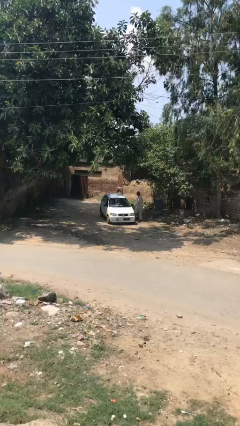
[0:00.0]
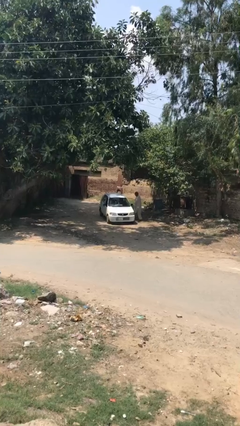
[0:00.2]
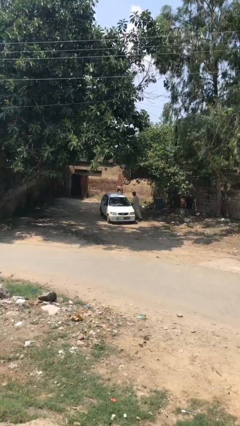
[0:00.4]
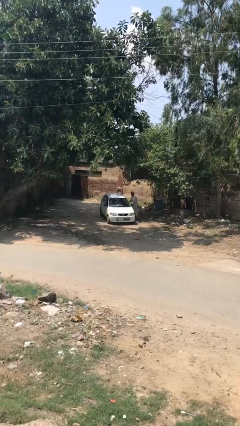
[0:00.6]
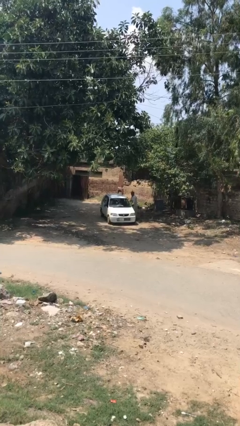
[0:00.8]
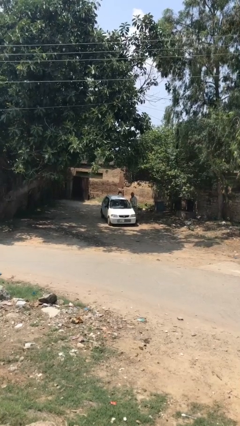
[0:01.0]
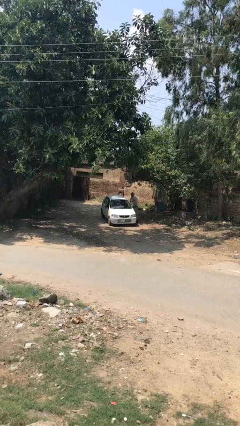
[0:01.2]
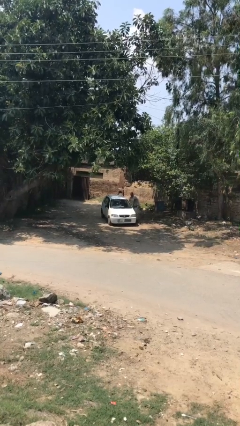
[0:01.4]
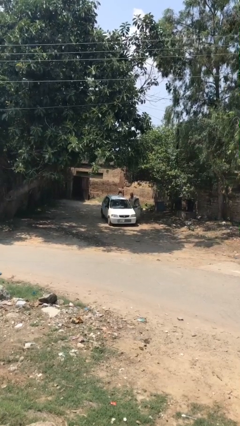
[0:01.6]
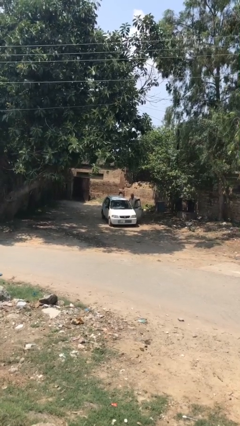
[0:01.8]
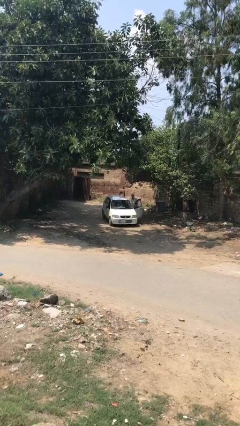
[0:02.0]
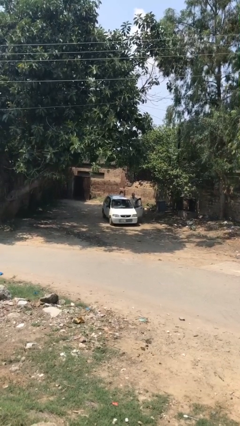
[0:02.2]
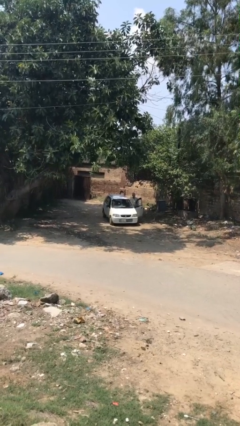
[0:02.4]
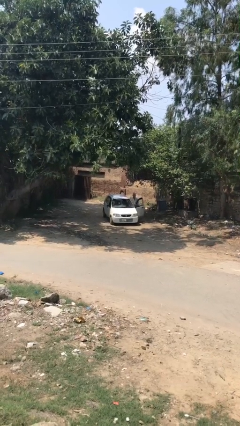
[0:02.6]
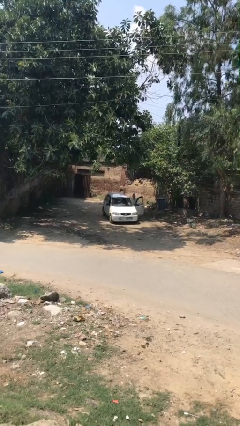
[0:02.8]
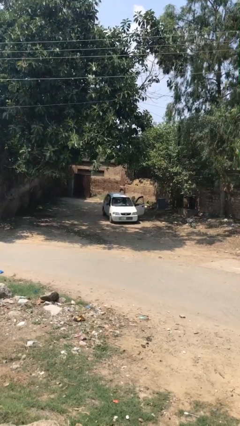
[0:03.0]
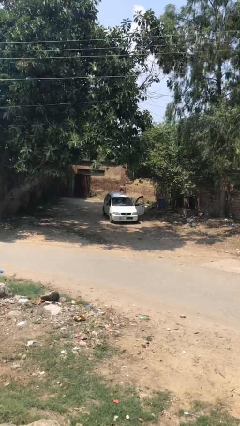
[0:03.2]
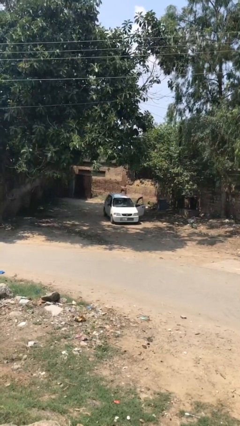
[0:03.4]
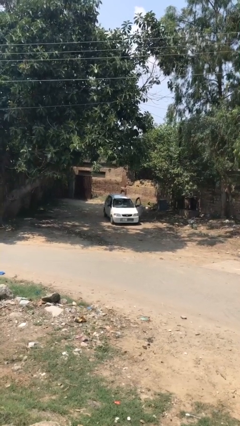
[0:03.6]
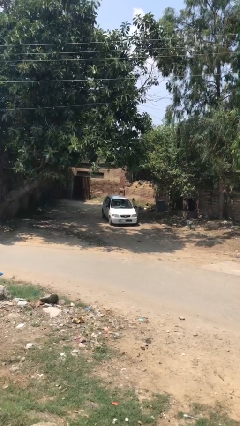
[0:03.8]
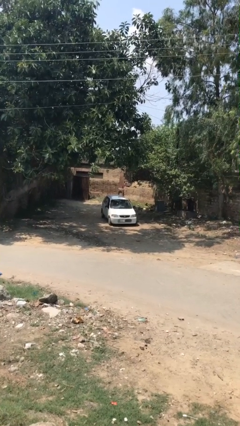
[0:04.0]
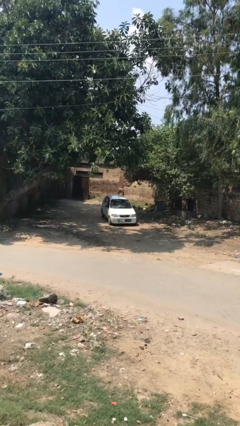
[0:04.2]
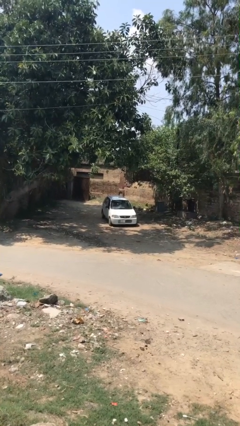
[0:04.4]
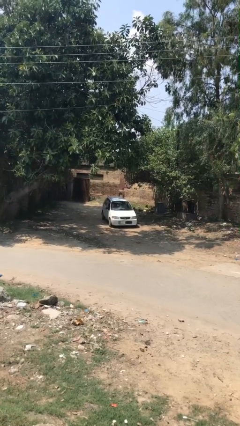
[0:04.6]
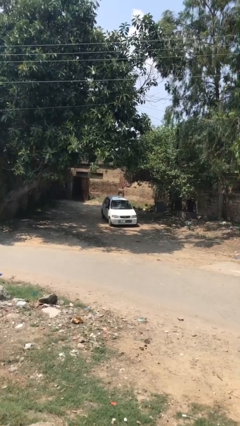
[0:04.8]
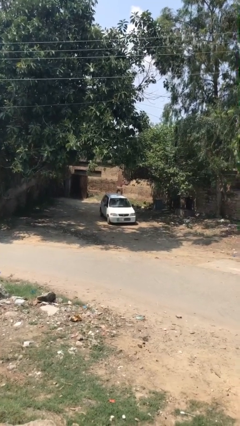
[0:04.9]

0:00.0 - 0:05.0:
car picks up person

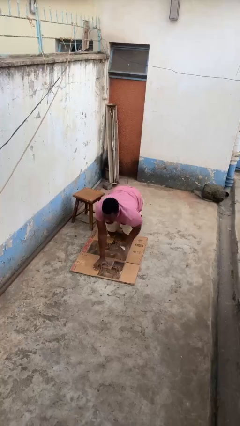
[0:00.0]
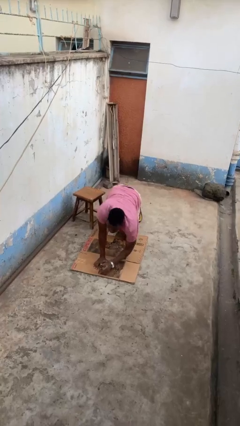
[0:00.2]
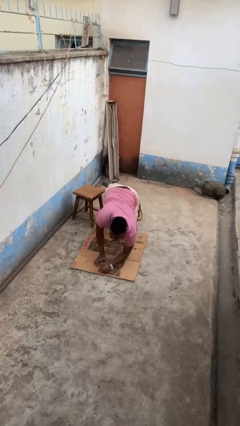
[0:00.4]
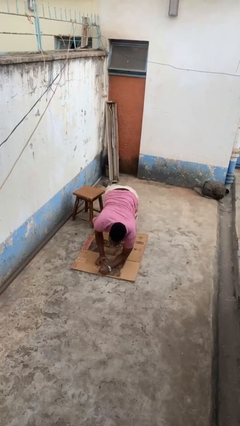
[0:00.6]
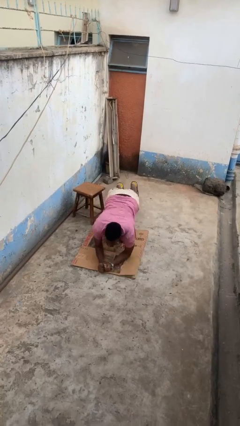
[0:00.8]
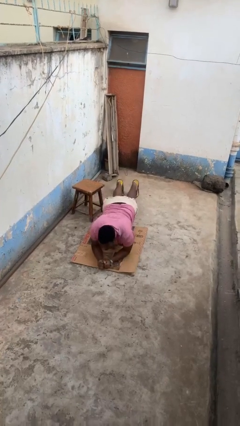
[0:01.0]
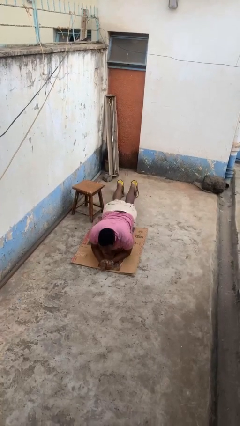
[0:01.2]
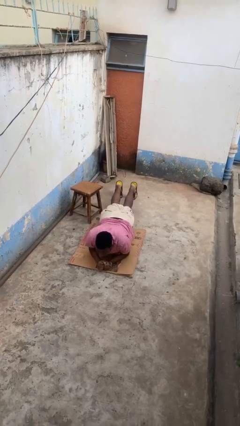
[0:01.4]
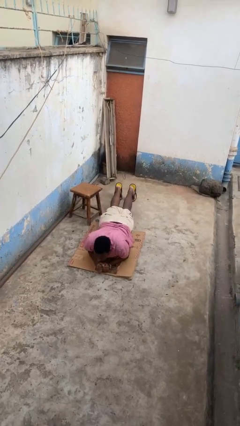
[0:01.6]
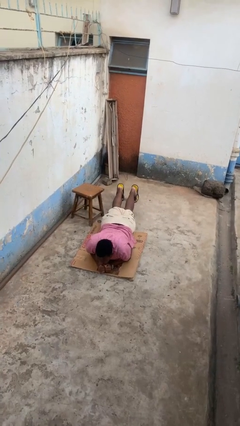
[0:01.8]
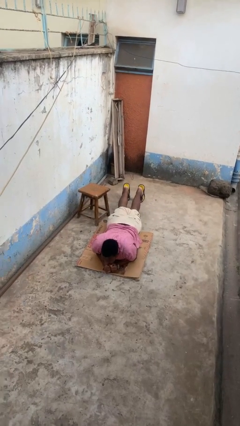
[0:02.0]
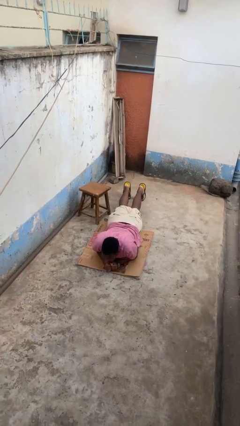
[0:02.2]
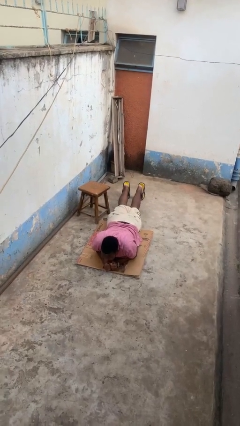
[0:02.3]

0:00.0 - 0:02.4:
person lies down on floor

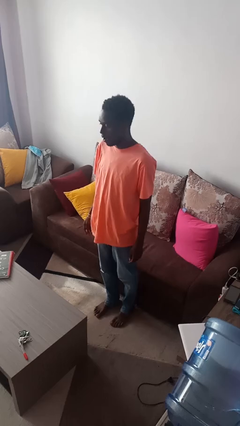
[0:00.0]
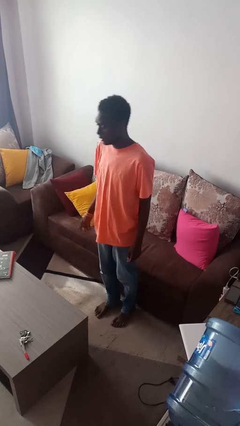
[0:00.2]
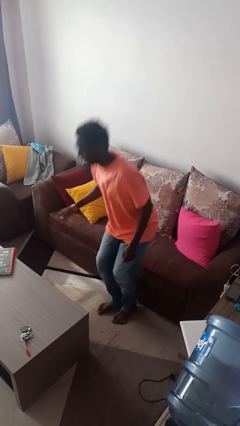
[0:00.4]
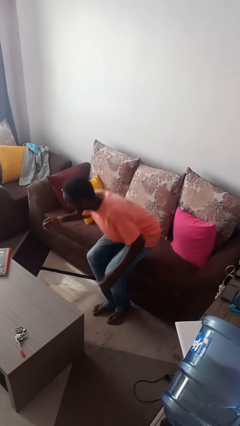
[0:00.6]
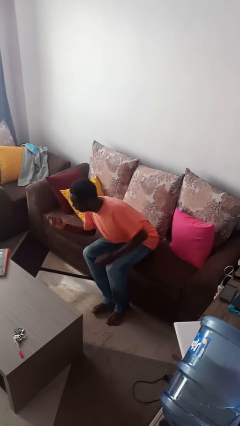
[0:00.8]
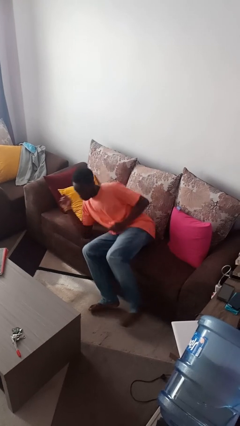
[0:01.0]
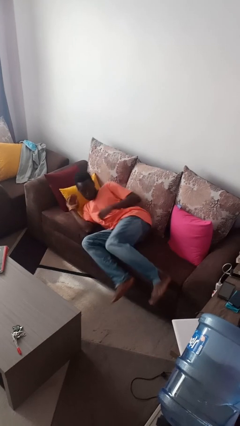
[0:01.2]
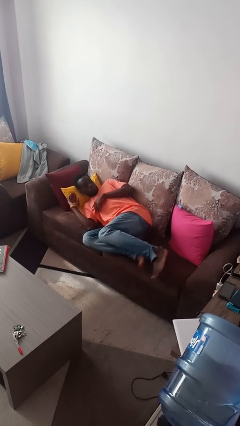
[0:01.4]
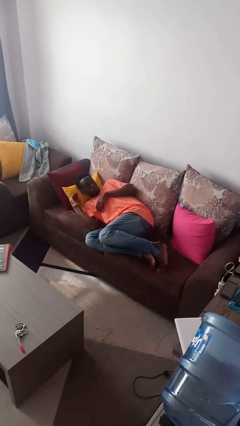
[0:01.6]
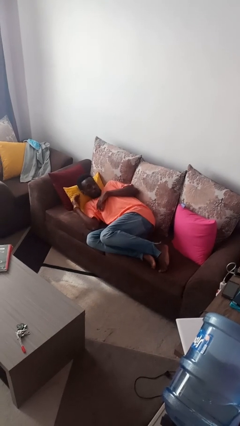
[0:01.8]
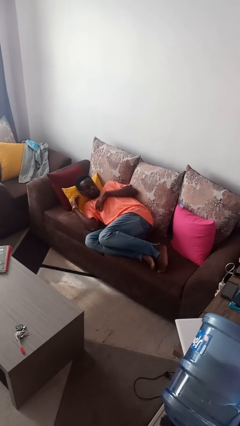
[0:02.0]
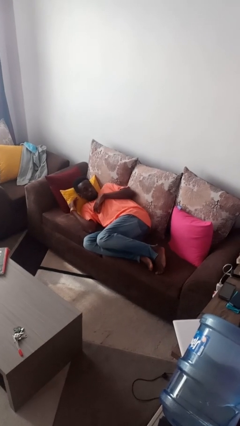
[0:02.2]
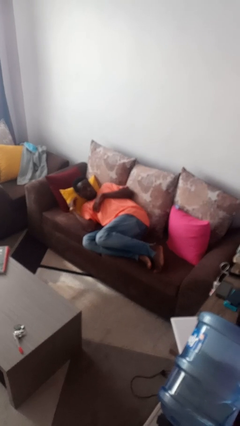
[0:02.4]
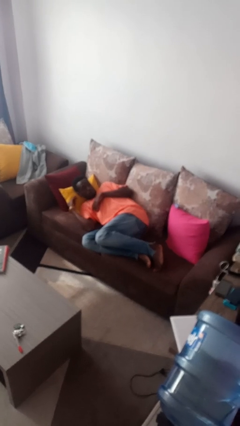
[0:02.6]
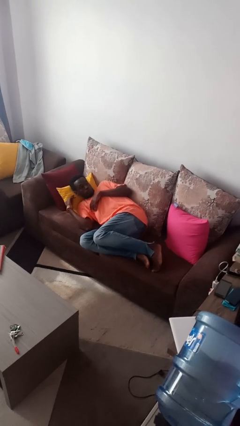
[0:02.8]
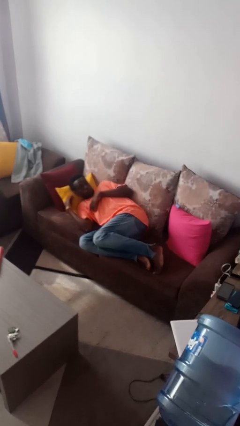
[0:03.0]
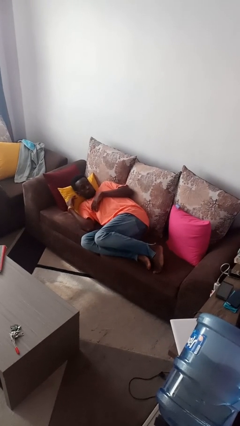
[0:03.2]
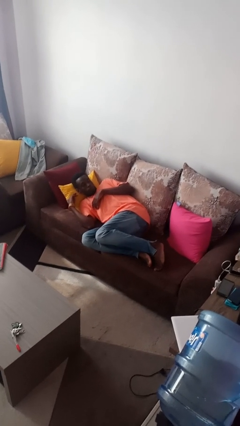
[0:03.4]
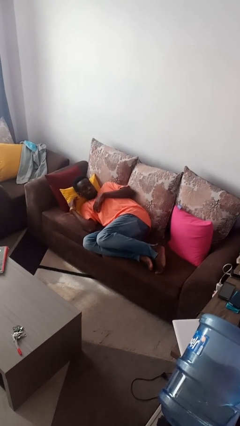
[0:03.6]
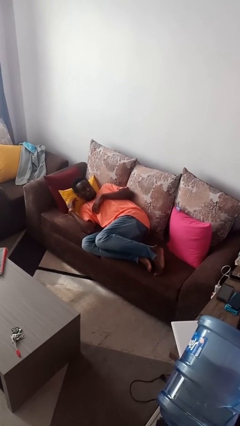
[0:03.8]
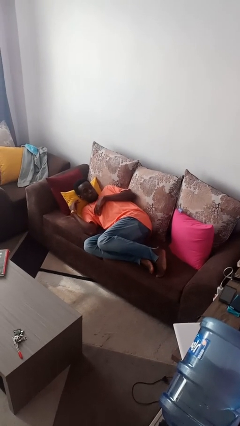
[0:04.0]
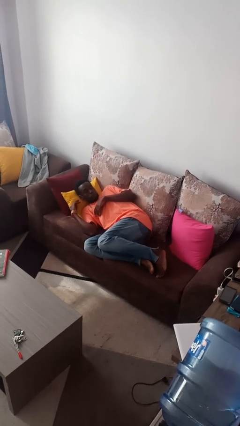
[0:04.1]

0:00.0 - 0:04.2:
person lies down on couch

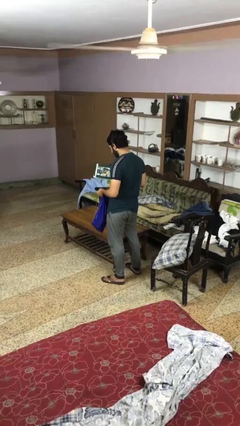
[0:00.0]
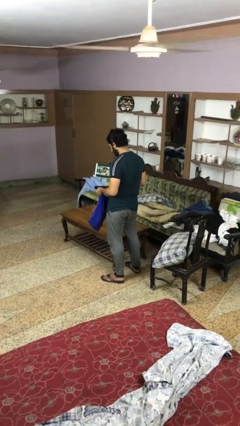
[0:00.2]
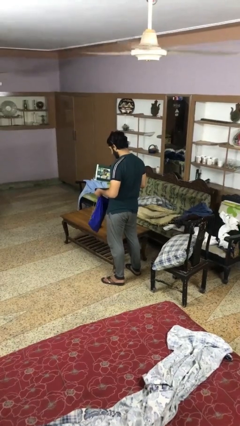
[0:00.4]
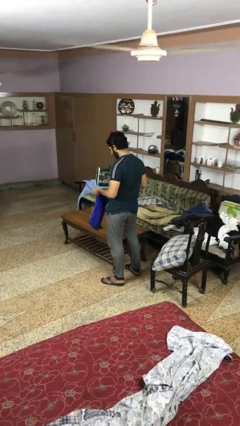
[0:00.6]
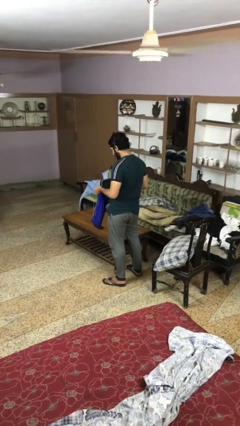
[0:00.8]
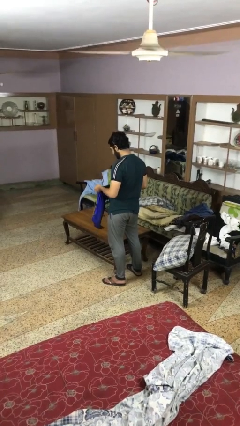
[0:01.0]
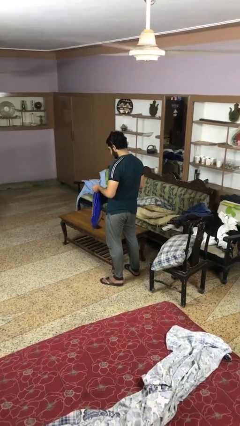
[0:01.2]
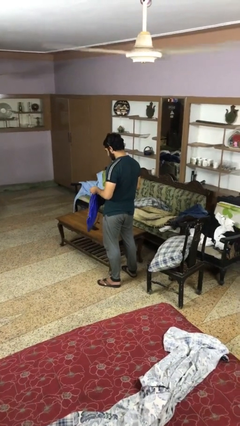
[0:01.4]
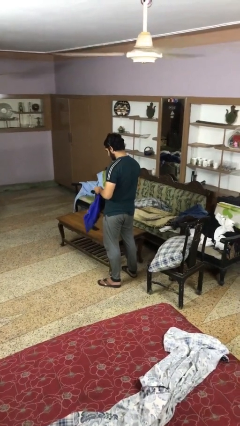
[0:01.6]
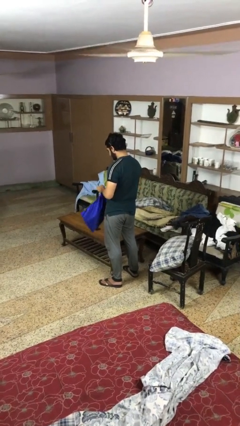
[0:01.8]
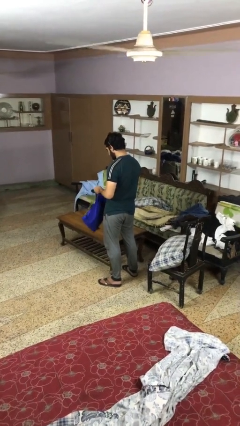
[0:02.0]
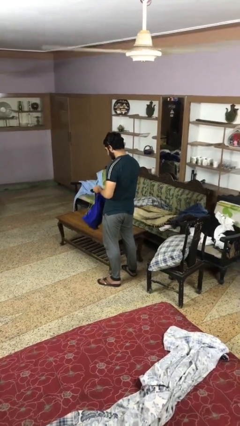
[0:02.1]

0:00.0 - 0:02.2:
person puts object into bag

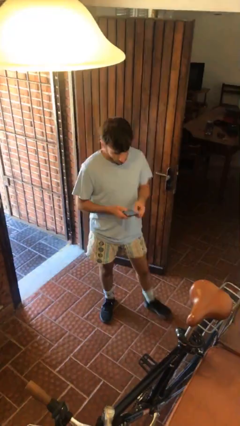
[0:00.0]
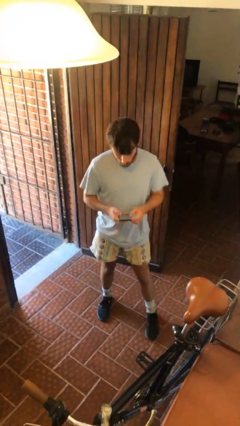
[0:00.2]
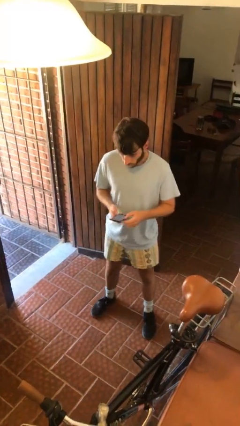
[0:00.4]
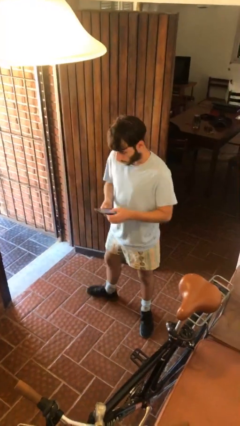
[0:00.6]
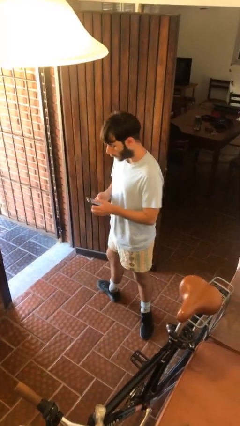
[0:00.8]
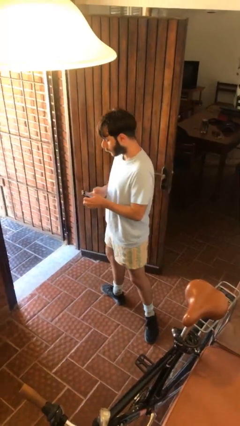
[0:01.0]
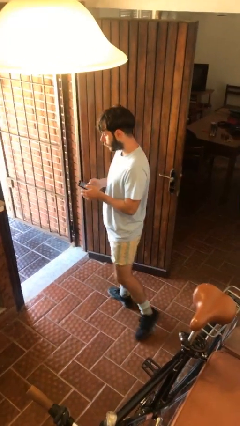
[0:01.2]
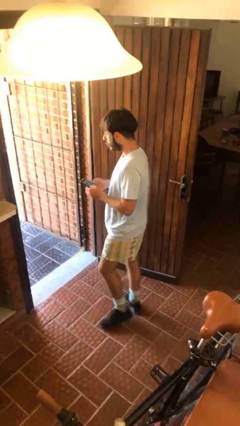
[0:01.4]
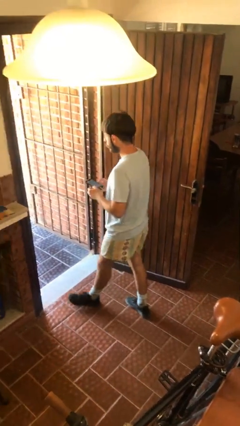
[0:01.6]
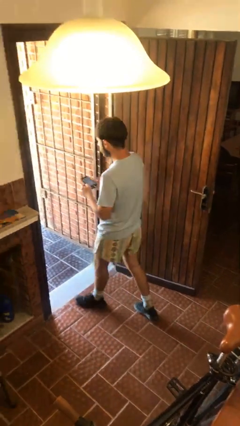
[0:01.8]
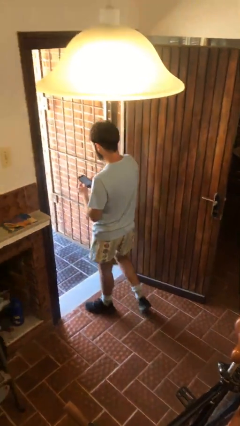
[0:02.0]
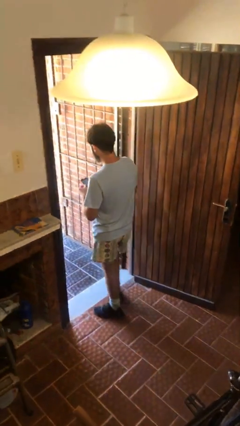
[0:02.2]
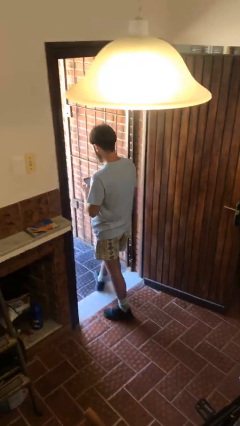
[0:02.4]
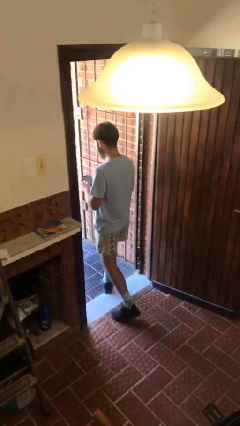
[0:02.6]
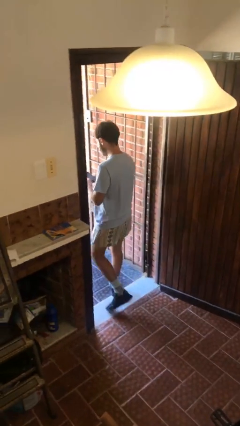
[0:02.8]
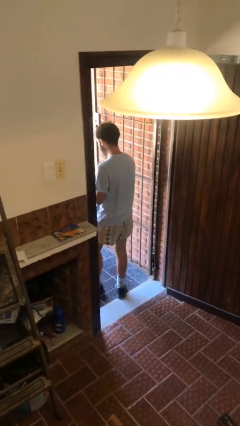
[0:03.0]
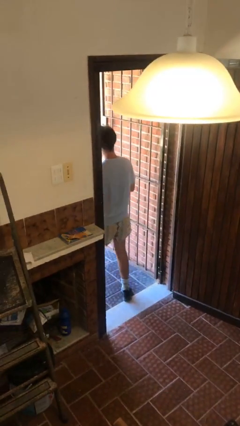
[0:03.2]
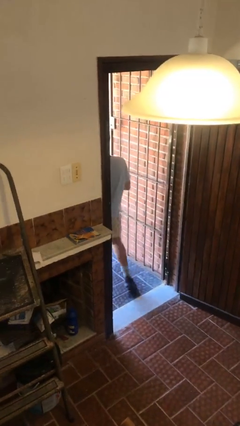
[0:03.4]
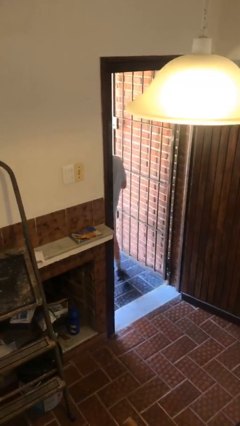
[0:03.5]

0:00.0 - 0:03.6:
person exits scene through structure
